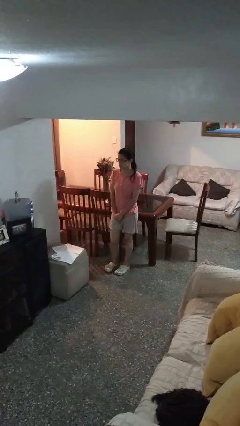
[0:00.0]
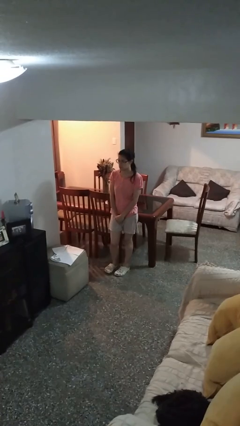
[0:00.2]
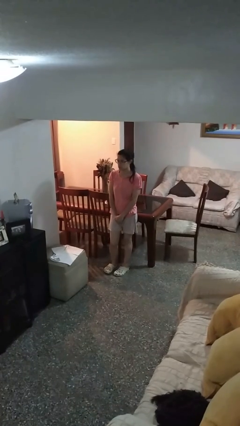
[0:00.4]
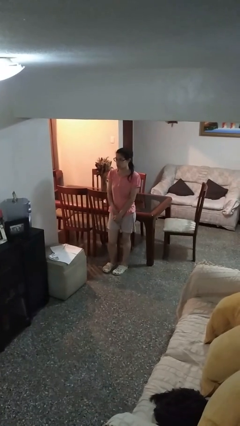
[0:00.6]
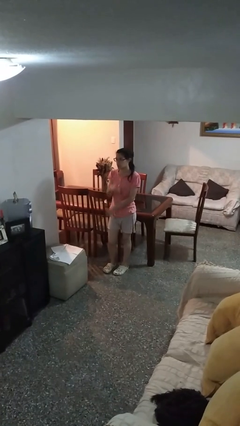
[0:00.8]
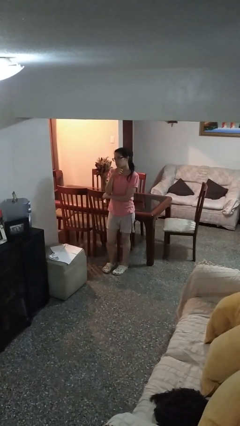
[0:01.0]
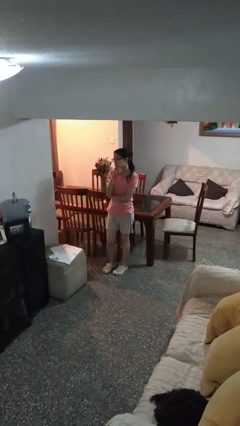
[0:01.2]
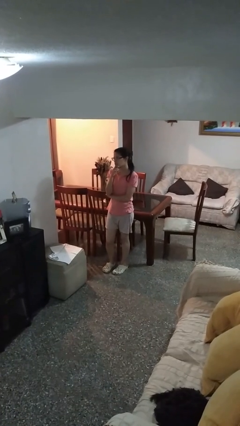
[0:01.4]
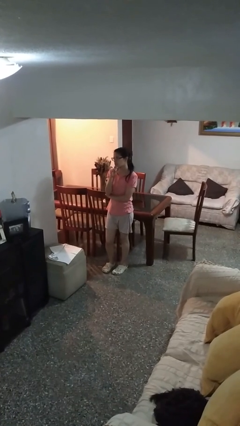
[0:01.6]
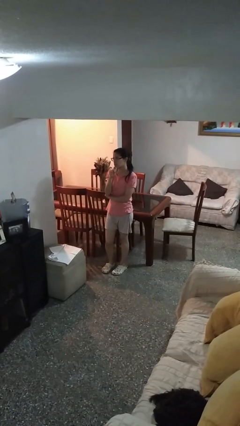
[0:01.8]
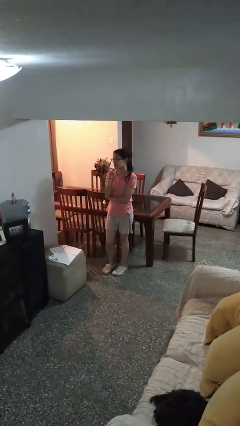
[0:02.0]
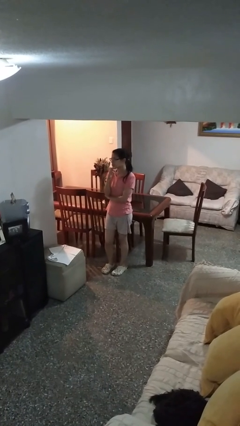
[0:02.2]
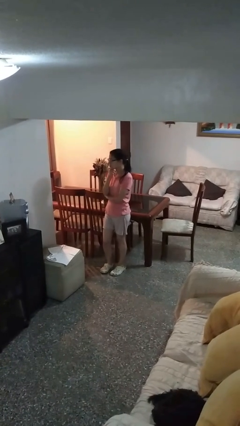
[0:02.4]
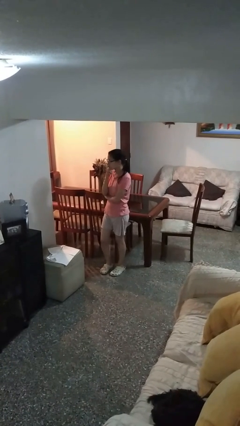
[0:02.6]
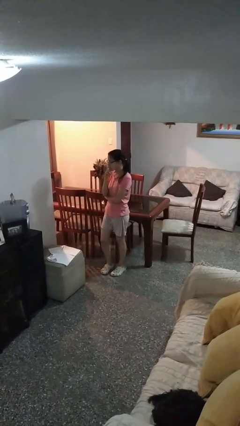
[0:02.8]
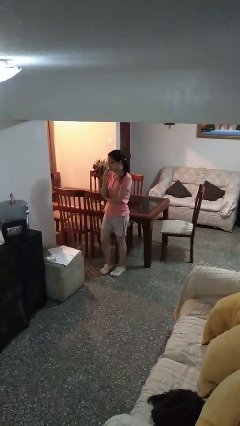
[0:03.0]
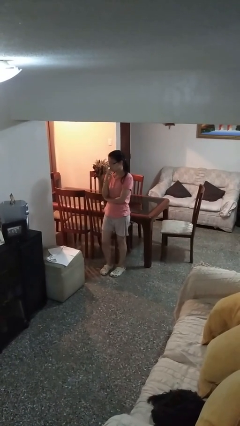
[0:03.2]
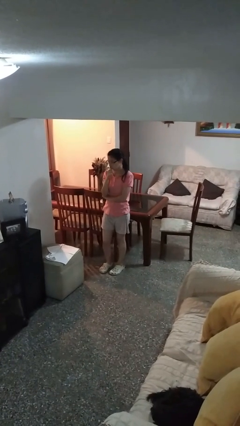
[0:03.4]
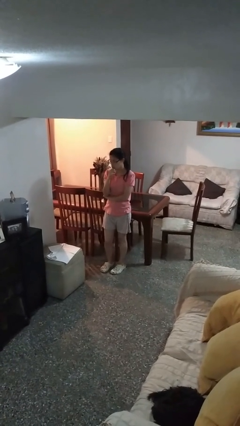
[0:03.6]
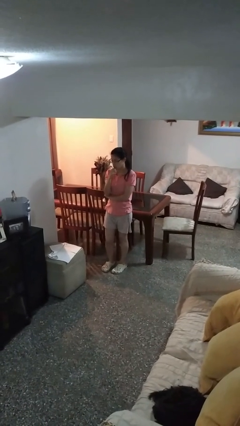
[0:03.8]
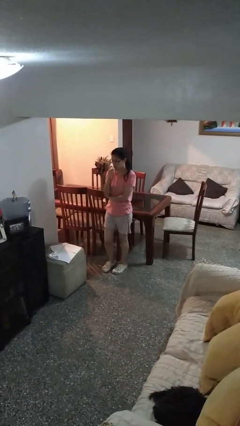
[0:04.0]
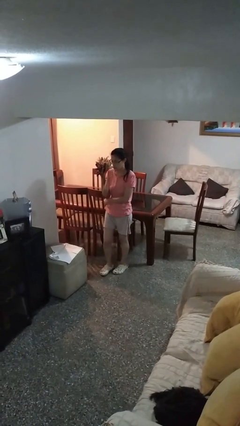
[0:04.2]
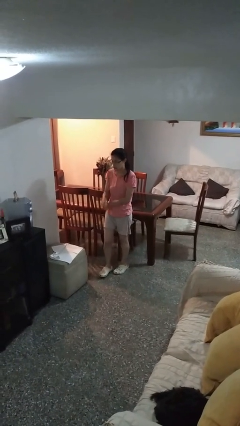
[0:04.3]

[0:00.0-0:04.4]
person strokes chin

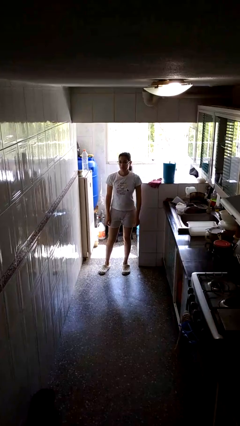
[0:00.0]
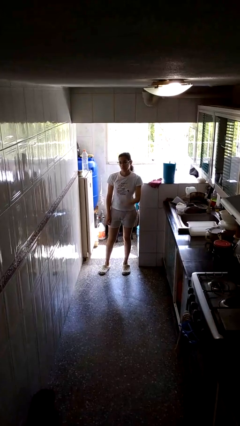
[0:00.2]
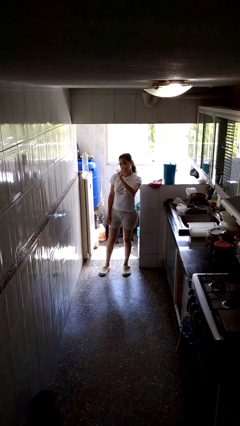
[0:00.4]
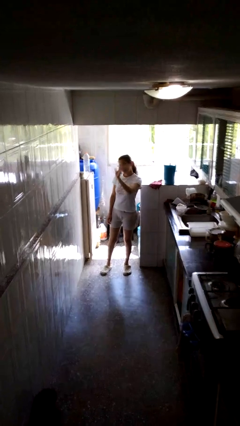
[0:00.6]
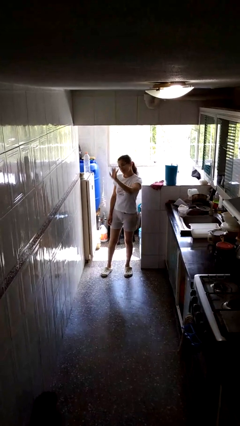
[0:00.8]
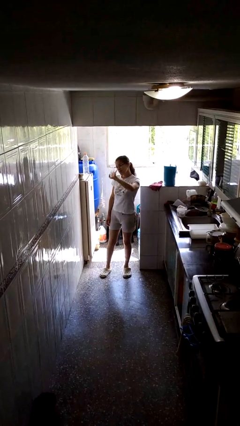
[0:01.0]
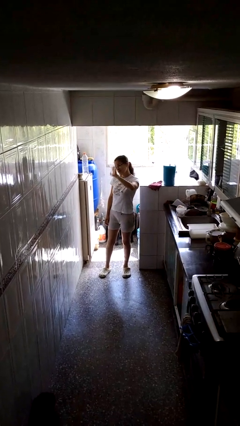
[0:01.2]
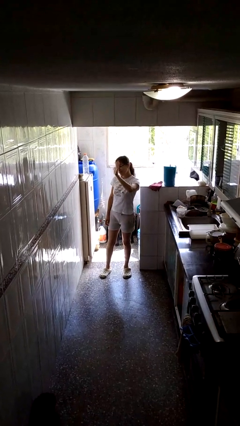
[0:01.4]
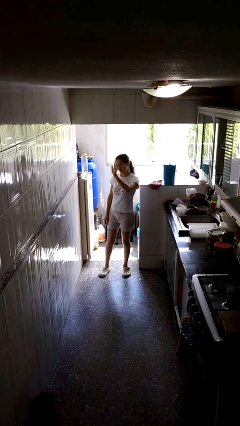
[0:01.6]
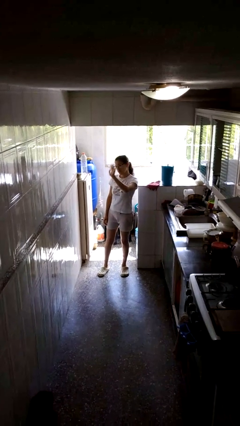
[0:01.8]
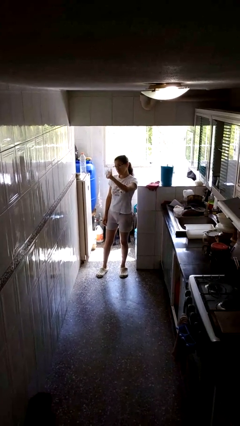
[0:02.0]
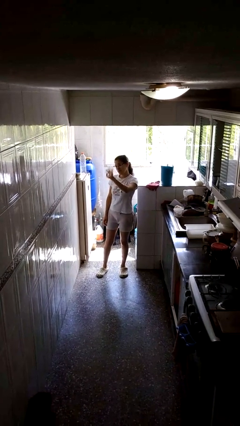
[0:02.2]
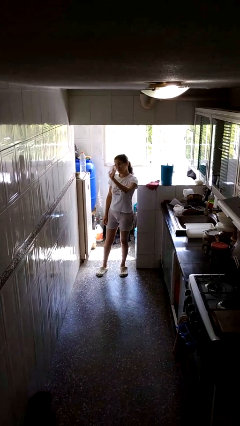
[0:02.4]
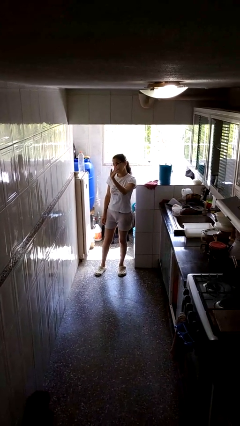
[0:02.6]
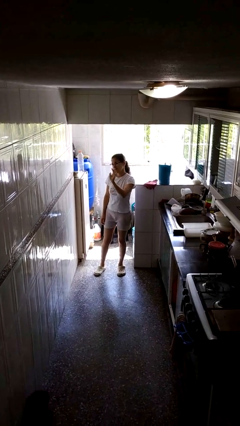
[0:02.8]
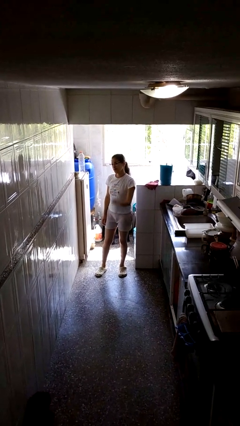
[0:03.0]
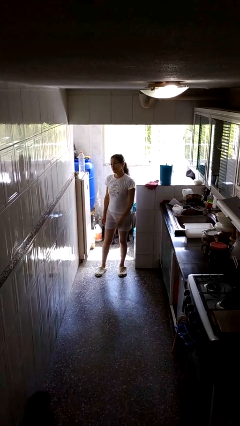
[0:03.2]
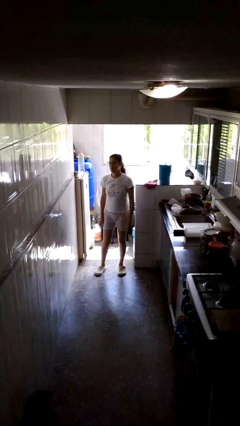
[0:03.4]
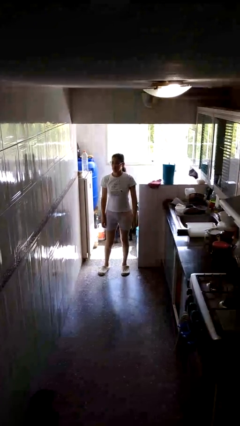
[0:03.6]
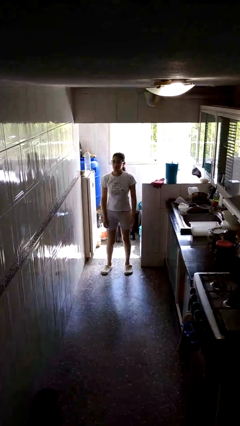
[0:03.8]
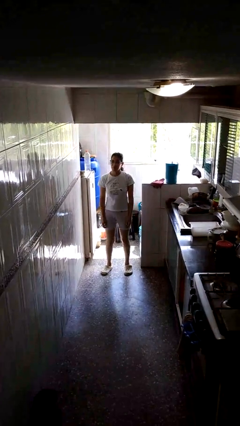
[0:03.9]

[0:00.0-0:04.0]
person waves at person

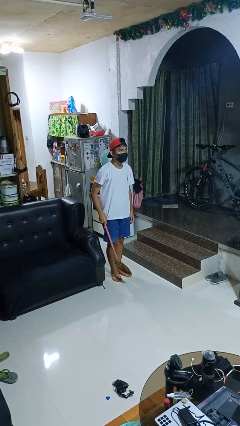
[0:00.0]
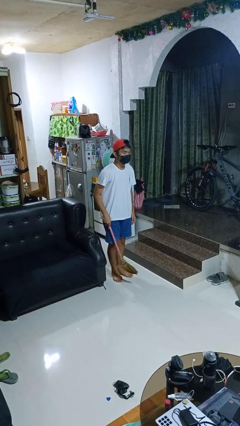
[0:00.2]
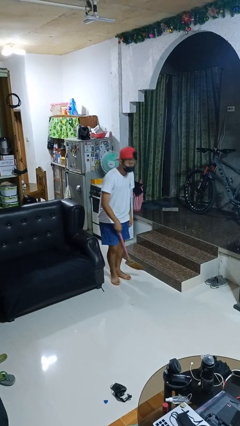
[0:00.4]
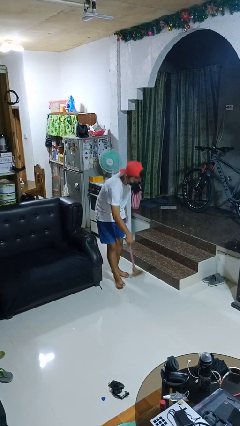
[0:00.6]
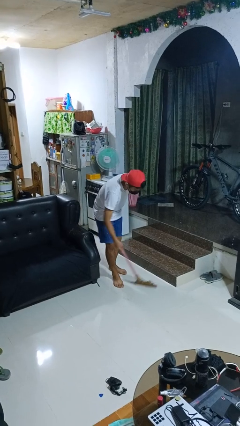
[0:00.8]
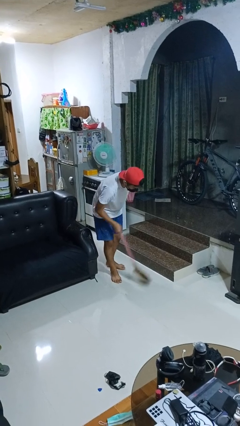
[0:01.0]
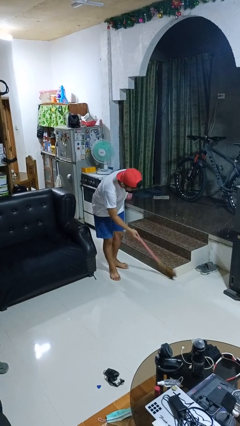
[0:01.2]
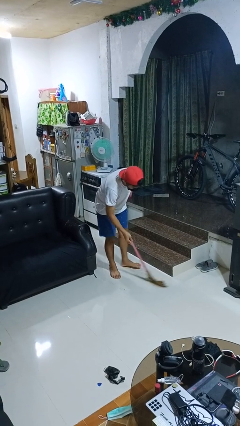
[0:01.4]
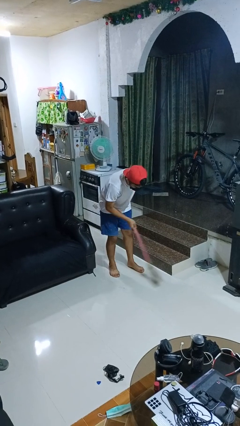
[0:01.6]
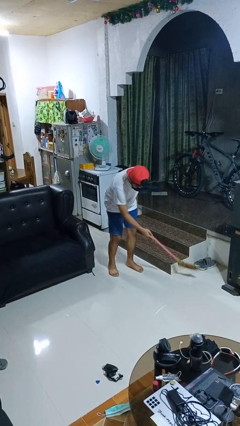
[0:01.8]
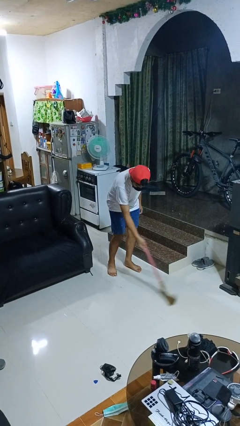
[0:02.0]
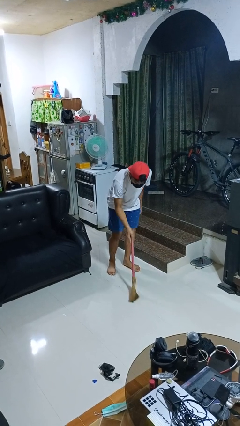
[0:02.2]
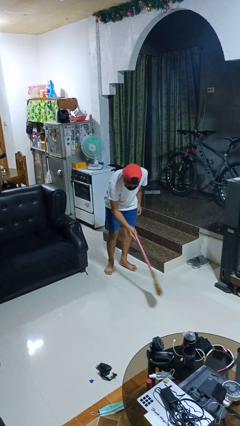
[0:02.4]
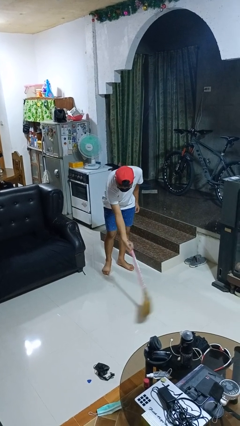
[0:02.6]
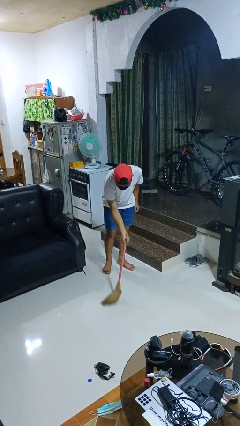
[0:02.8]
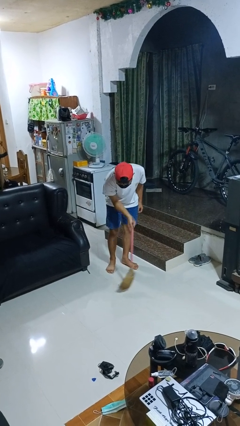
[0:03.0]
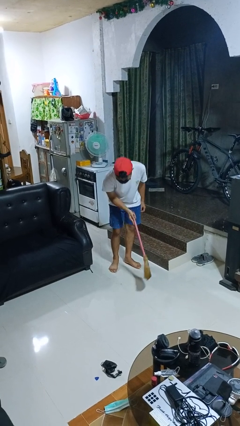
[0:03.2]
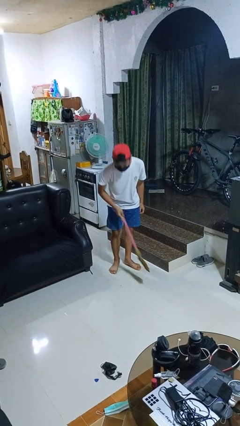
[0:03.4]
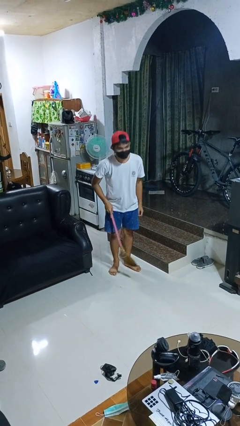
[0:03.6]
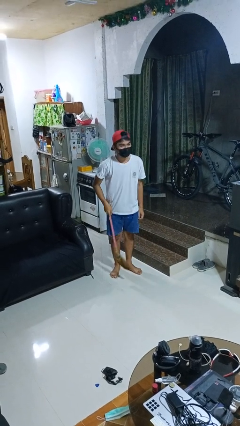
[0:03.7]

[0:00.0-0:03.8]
person sweeps floor

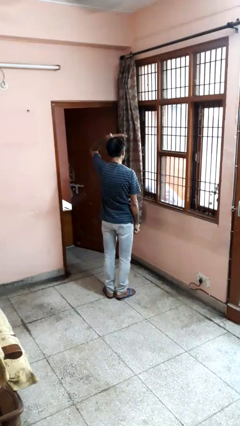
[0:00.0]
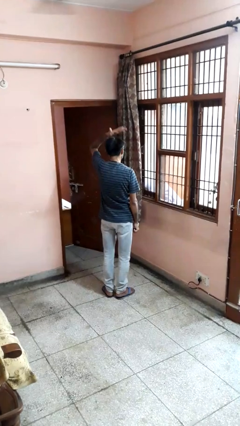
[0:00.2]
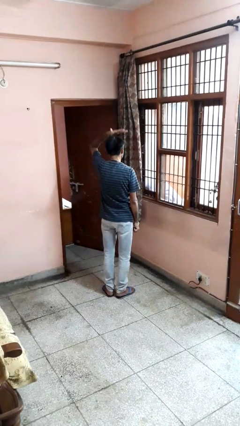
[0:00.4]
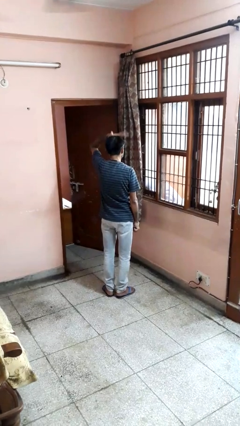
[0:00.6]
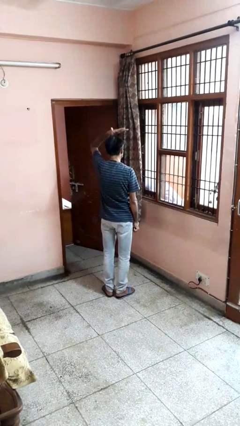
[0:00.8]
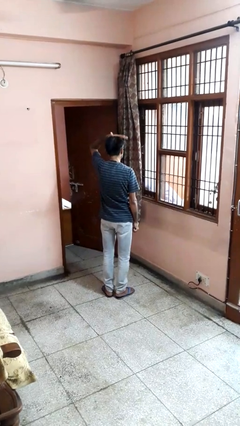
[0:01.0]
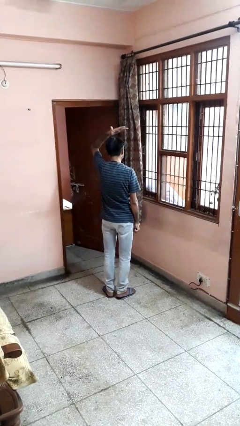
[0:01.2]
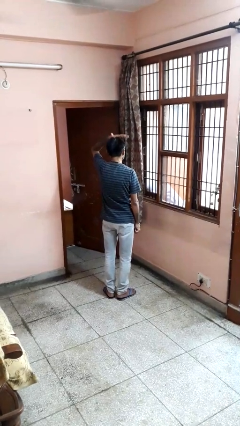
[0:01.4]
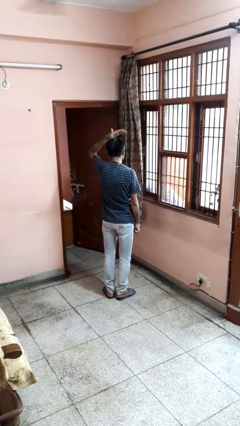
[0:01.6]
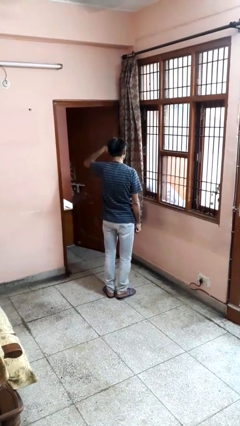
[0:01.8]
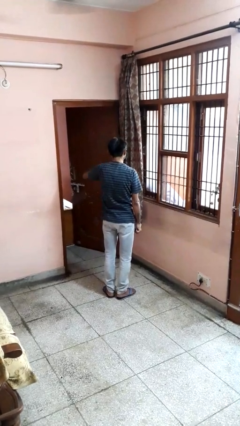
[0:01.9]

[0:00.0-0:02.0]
person pats head

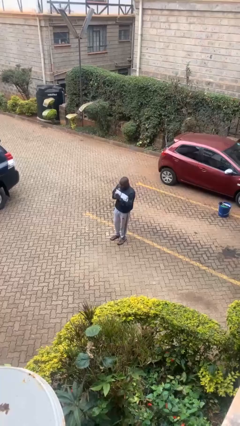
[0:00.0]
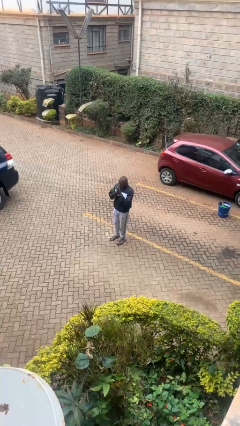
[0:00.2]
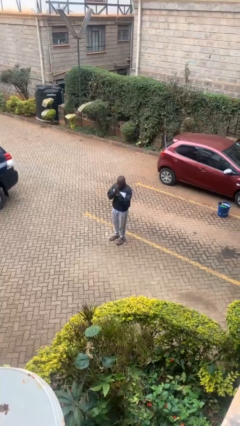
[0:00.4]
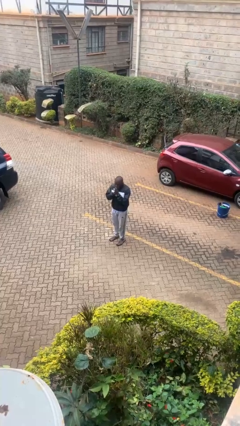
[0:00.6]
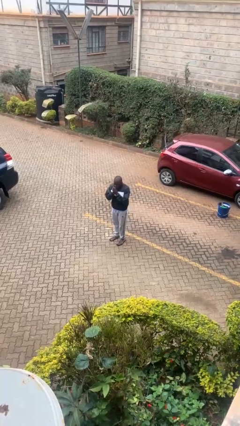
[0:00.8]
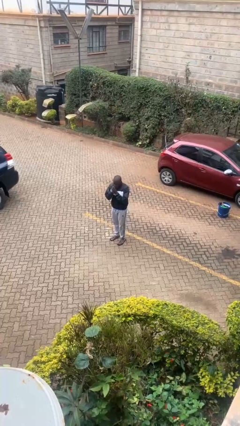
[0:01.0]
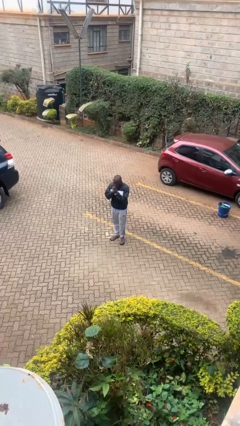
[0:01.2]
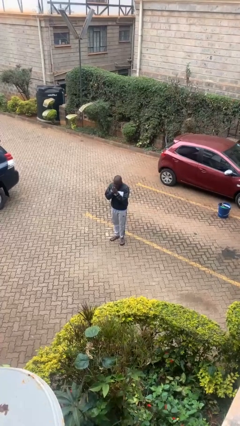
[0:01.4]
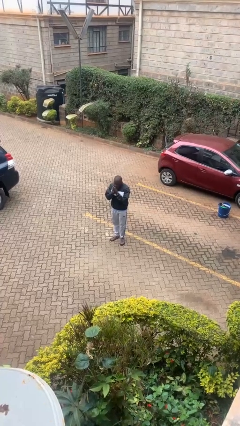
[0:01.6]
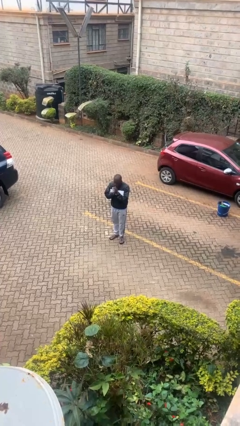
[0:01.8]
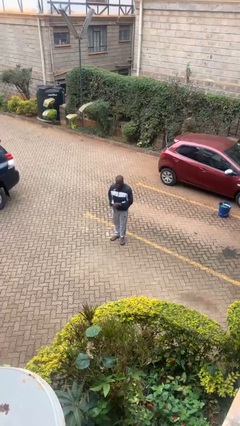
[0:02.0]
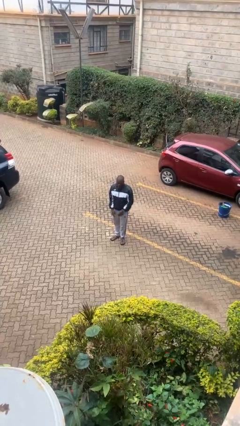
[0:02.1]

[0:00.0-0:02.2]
person blows into hands

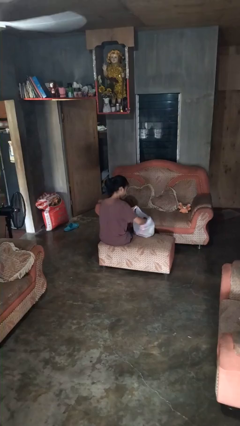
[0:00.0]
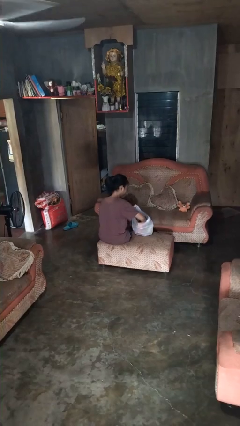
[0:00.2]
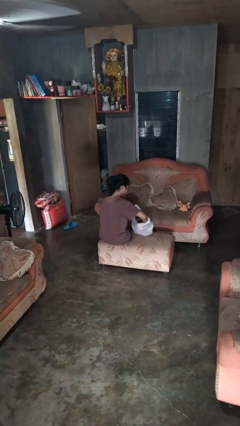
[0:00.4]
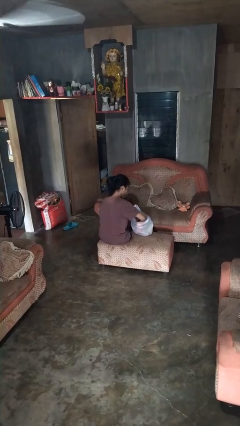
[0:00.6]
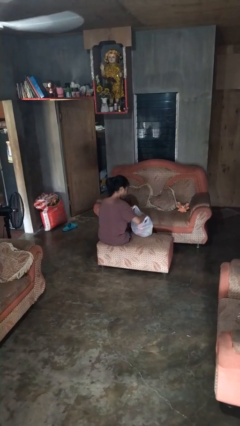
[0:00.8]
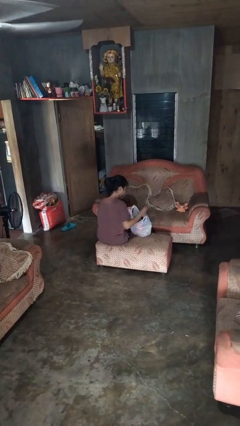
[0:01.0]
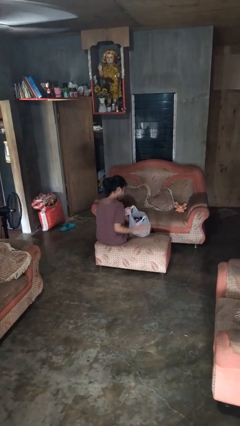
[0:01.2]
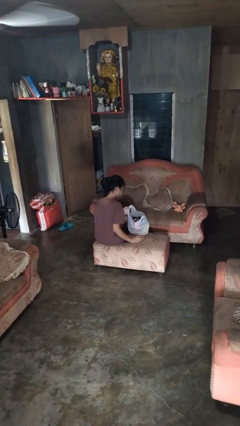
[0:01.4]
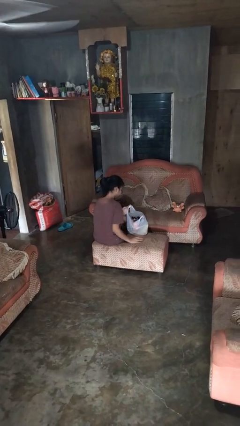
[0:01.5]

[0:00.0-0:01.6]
person takes object from bag
